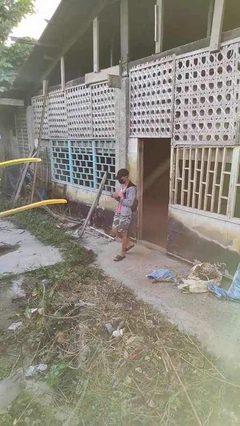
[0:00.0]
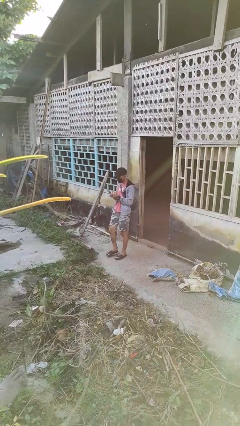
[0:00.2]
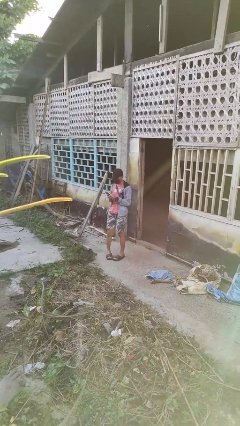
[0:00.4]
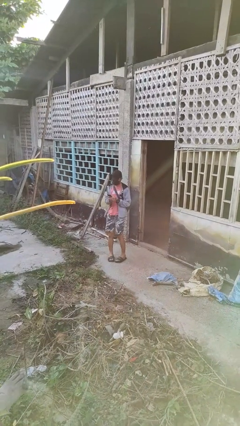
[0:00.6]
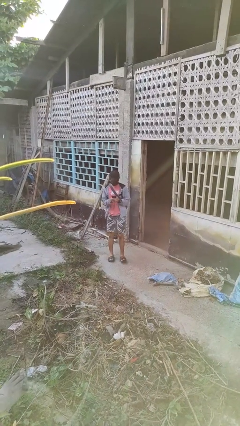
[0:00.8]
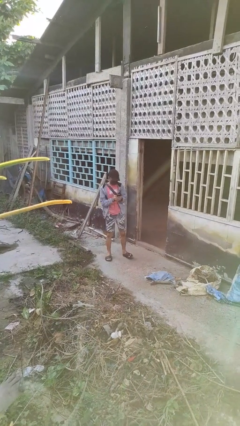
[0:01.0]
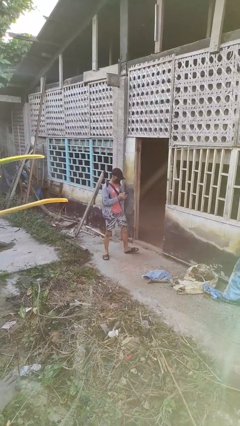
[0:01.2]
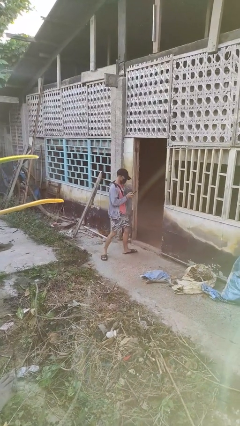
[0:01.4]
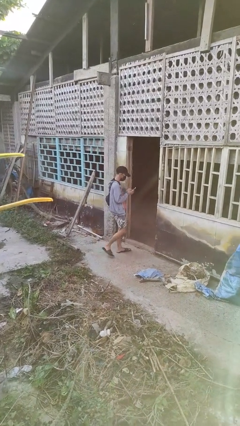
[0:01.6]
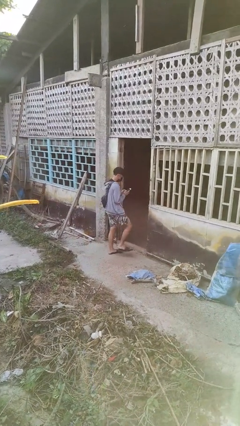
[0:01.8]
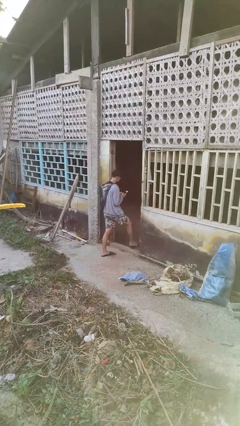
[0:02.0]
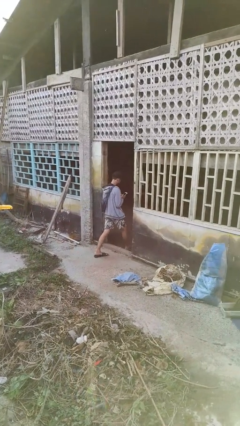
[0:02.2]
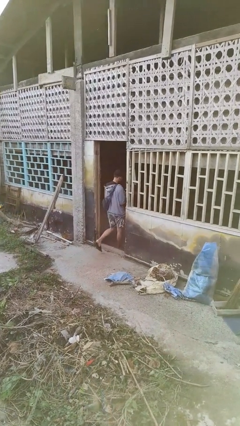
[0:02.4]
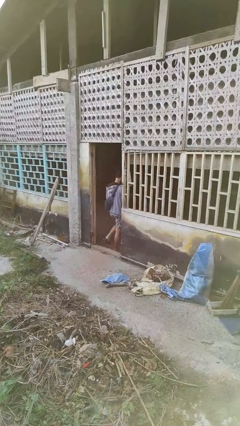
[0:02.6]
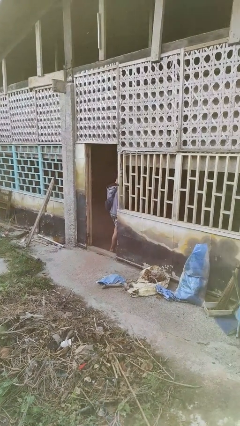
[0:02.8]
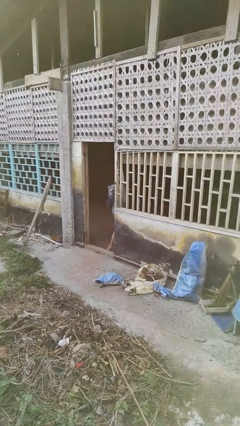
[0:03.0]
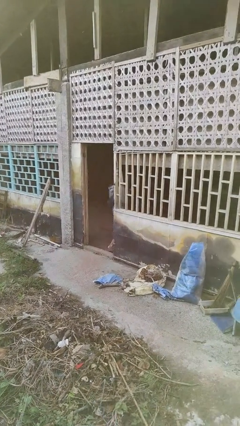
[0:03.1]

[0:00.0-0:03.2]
person exits scene through structure

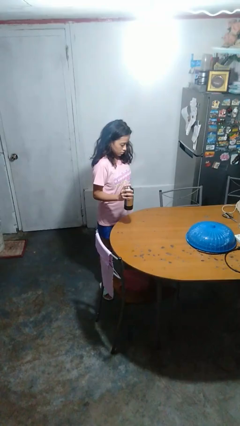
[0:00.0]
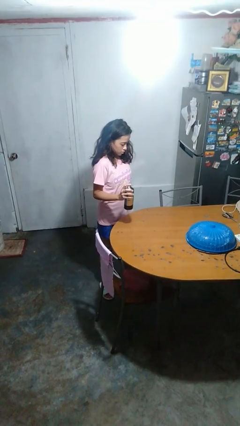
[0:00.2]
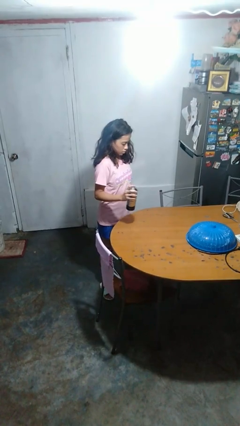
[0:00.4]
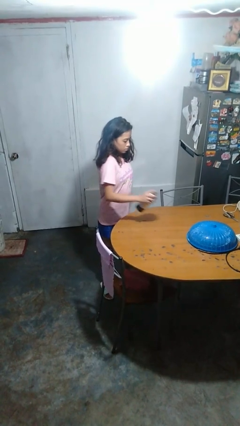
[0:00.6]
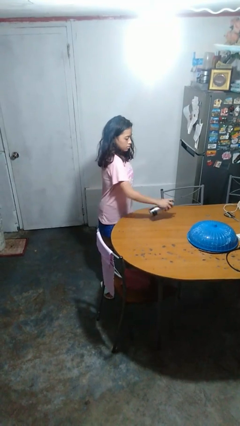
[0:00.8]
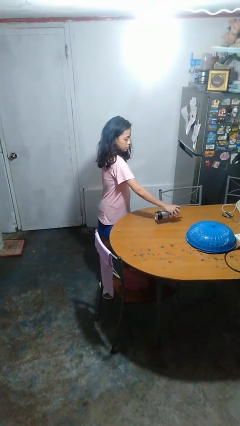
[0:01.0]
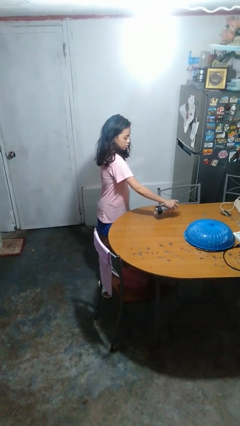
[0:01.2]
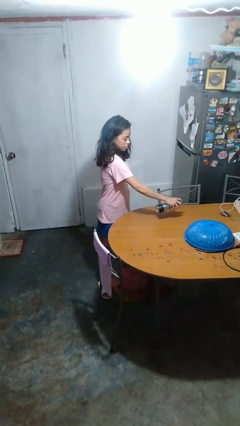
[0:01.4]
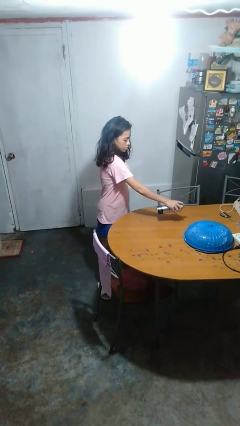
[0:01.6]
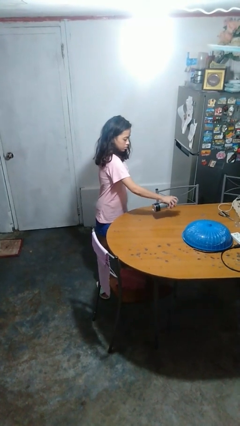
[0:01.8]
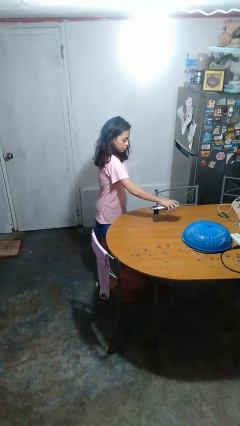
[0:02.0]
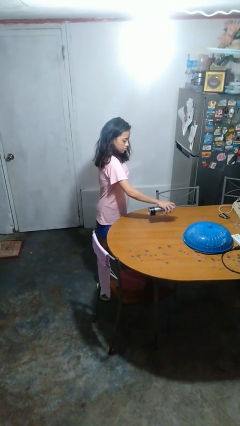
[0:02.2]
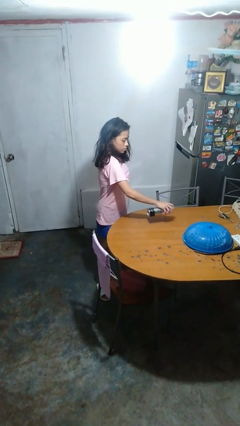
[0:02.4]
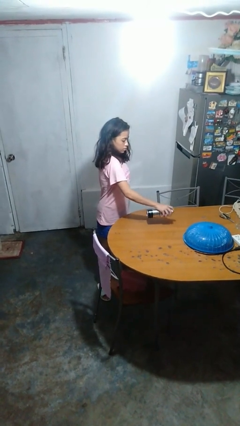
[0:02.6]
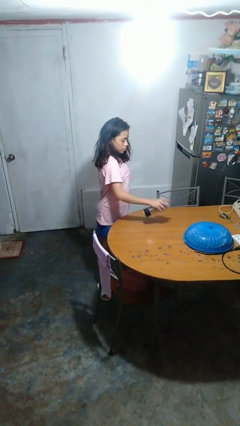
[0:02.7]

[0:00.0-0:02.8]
person sprays from bottle

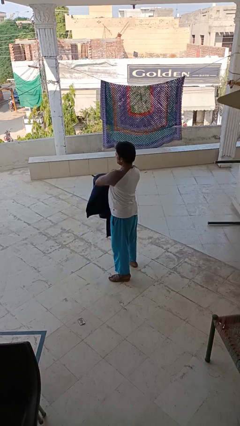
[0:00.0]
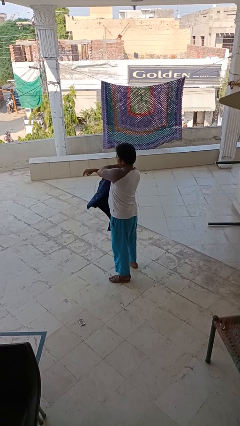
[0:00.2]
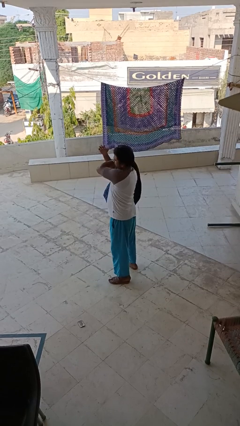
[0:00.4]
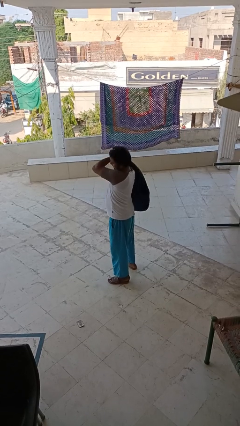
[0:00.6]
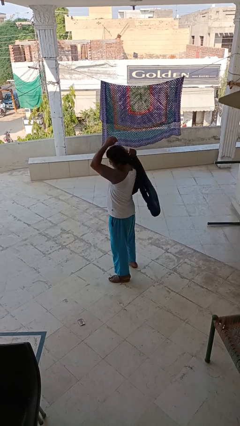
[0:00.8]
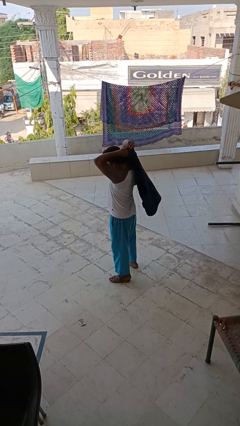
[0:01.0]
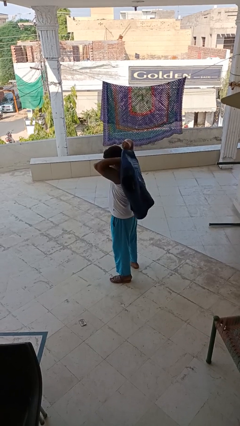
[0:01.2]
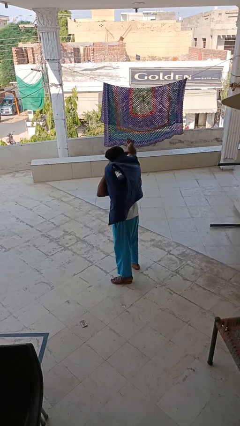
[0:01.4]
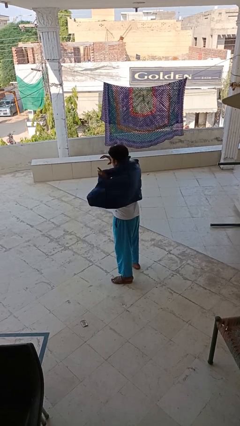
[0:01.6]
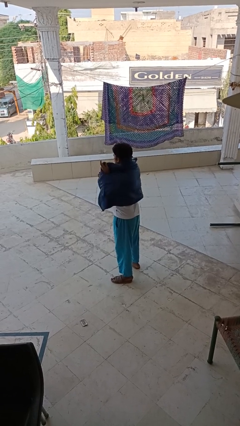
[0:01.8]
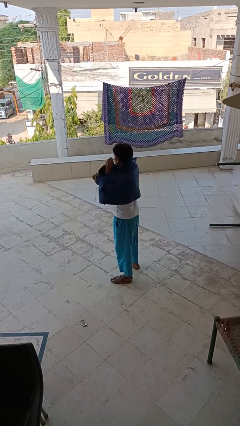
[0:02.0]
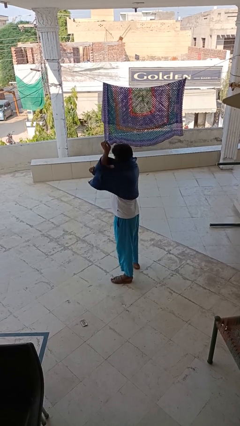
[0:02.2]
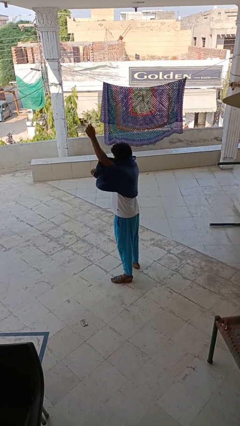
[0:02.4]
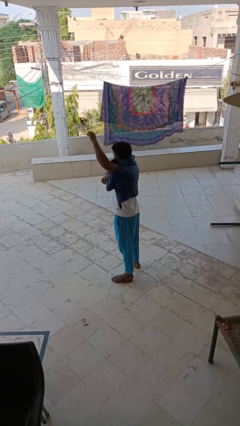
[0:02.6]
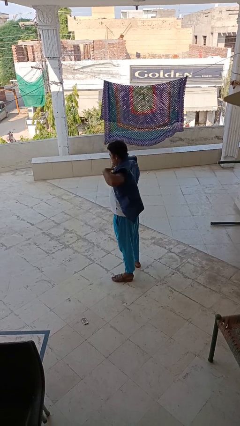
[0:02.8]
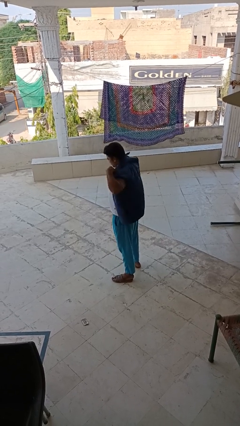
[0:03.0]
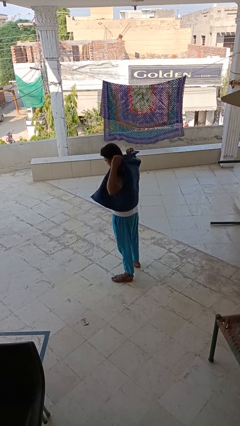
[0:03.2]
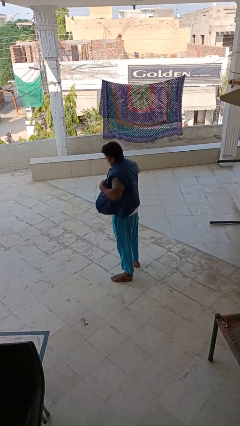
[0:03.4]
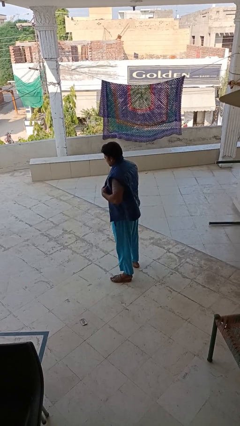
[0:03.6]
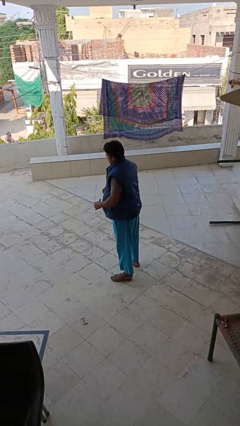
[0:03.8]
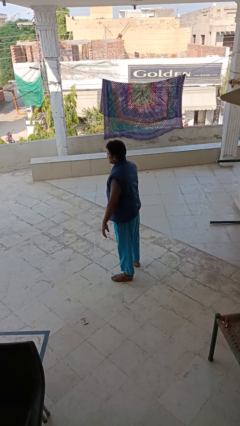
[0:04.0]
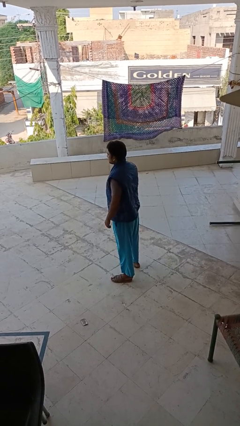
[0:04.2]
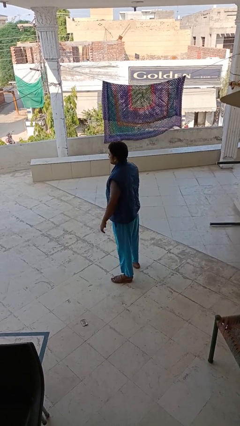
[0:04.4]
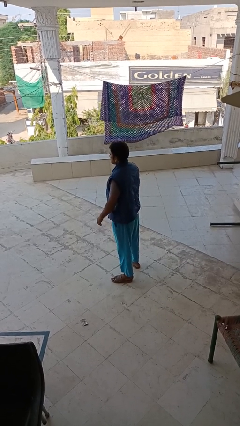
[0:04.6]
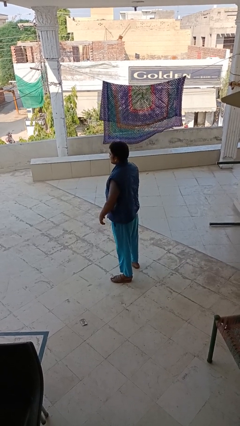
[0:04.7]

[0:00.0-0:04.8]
person puts on jacket

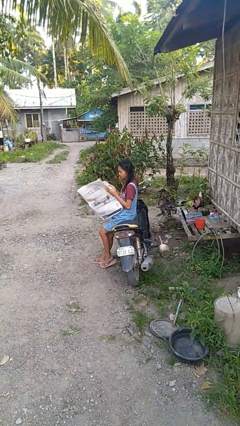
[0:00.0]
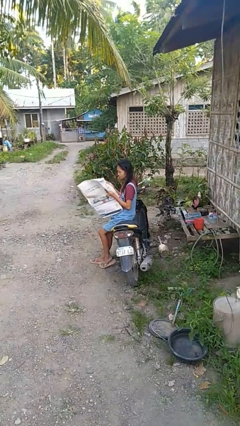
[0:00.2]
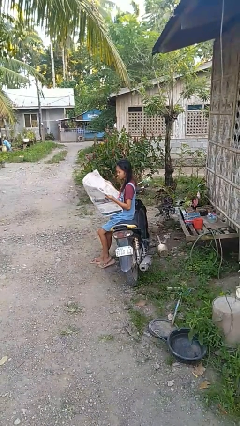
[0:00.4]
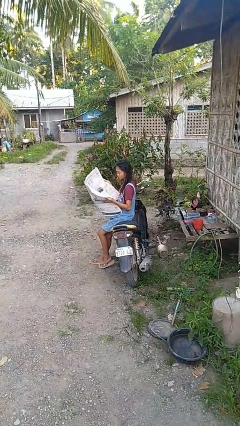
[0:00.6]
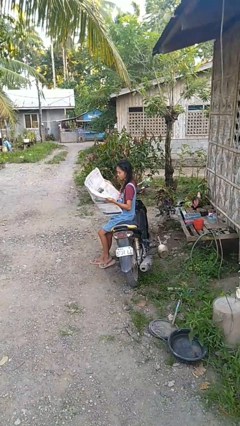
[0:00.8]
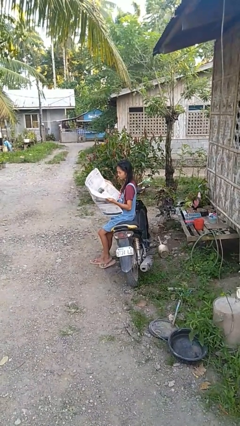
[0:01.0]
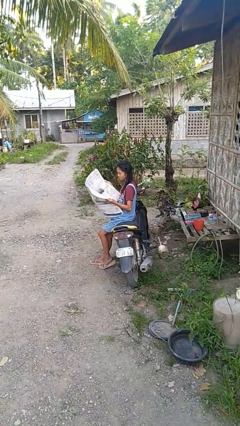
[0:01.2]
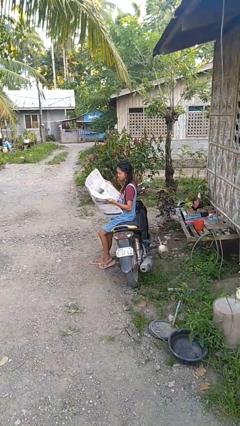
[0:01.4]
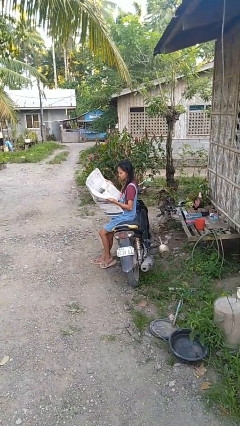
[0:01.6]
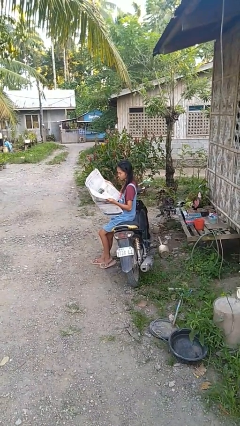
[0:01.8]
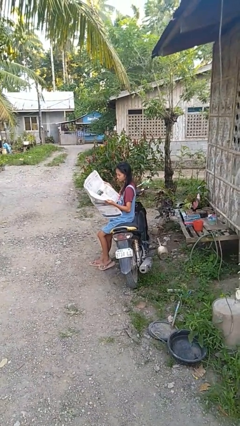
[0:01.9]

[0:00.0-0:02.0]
person reads newspaper

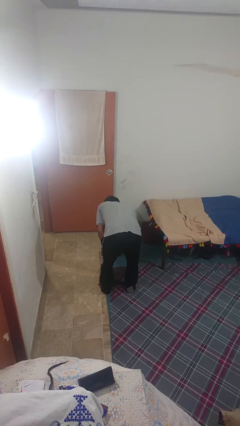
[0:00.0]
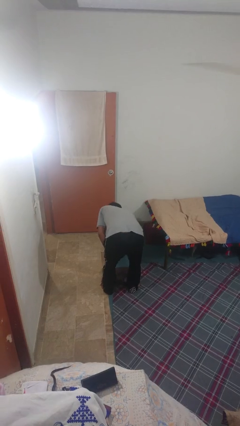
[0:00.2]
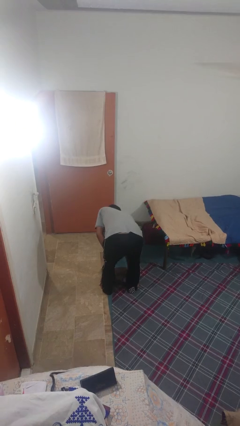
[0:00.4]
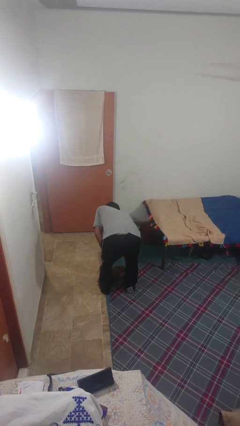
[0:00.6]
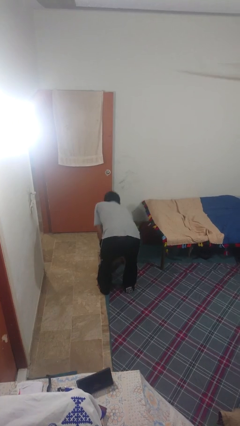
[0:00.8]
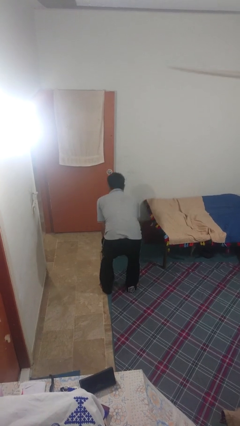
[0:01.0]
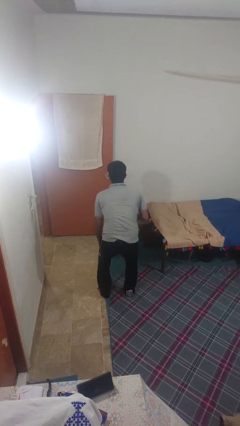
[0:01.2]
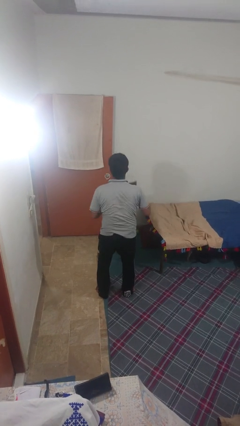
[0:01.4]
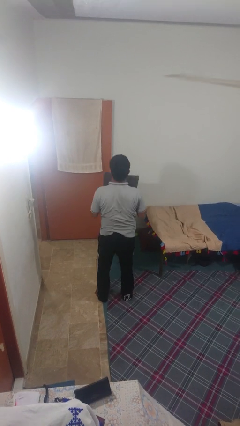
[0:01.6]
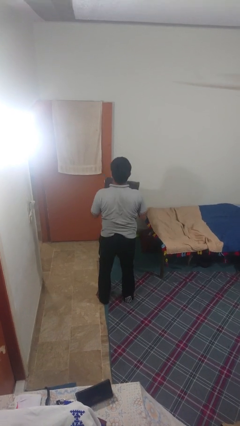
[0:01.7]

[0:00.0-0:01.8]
person picks up object from floor

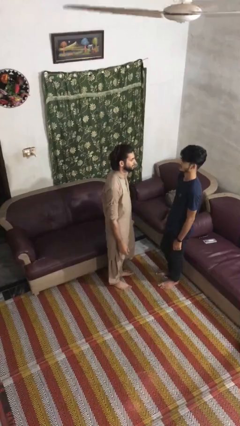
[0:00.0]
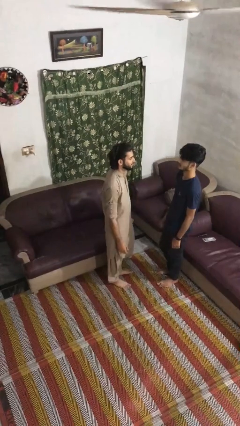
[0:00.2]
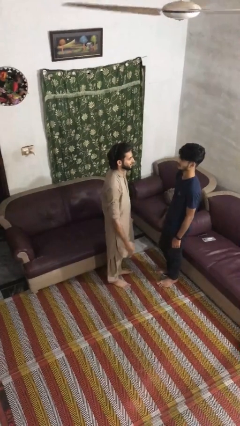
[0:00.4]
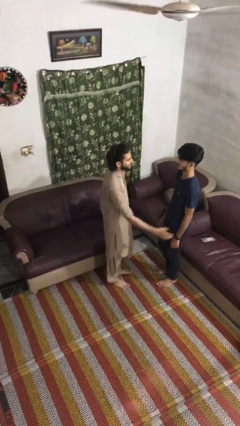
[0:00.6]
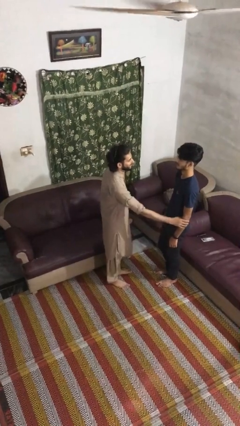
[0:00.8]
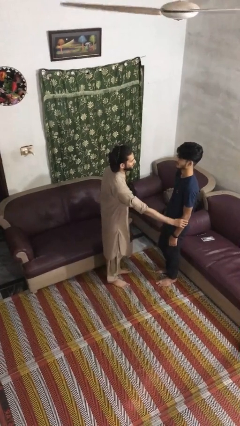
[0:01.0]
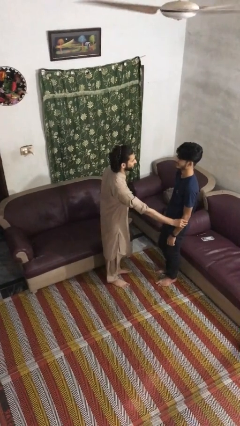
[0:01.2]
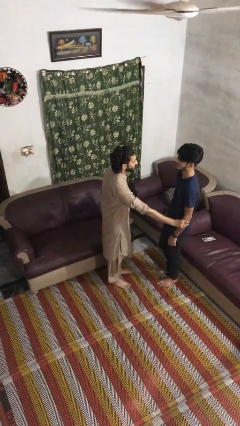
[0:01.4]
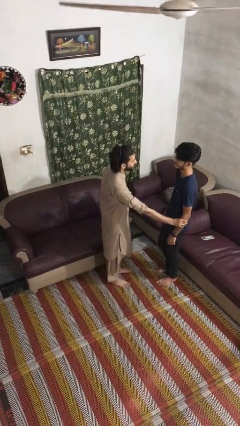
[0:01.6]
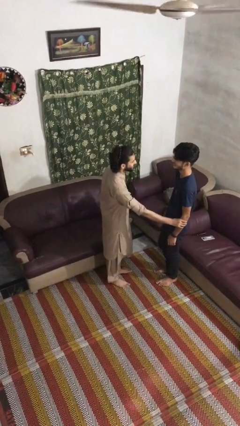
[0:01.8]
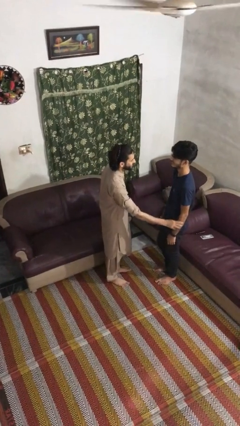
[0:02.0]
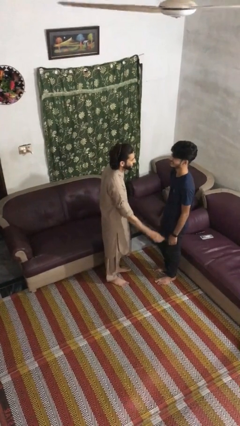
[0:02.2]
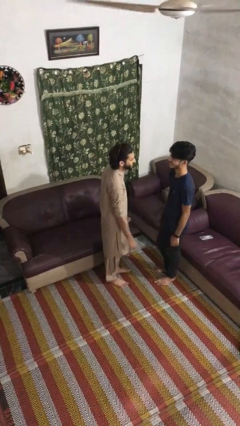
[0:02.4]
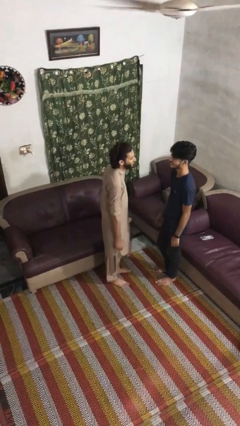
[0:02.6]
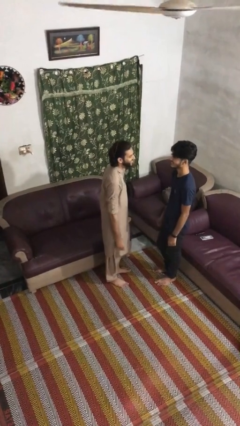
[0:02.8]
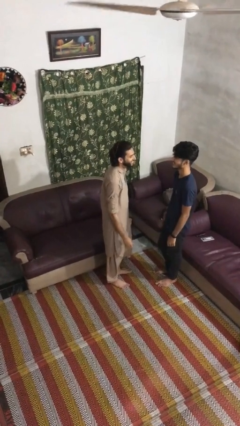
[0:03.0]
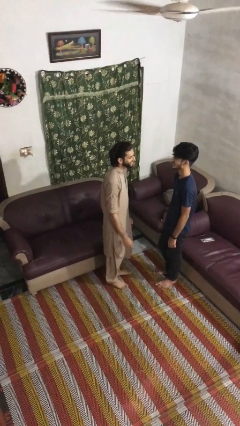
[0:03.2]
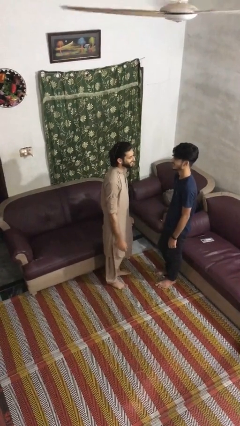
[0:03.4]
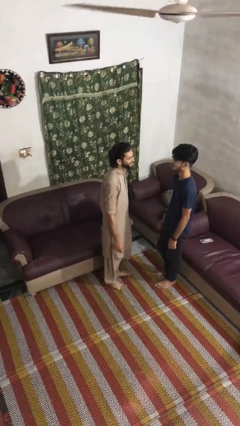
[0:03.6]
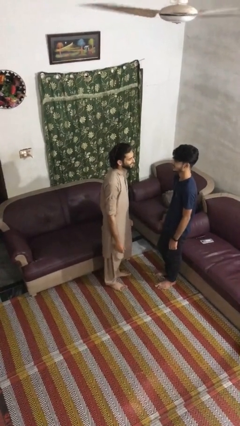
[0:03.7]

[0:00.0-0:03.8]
person grabs person by forearm
